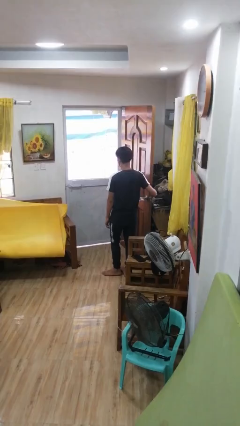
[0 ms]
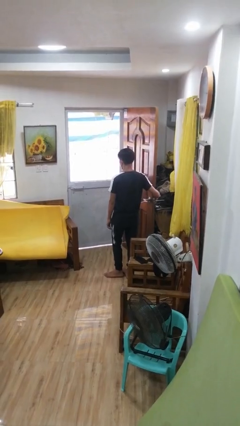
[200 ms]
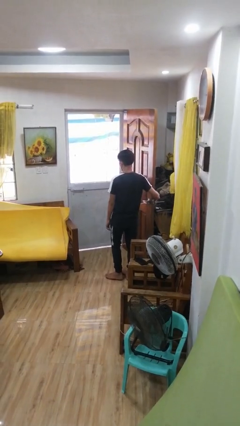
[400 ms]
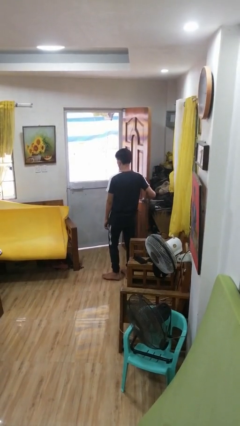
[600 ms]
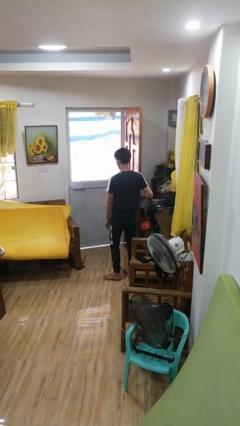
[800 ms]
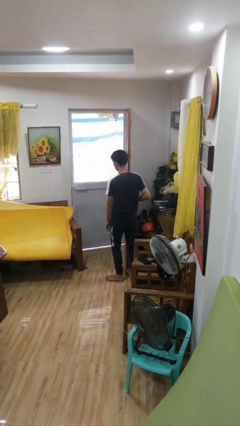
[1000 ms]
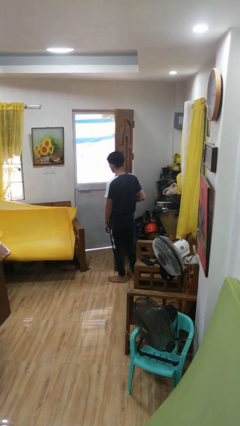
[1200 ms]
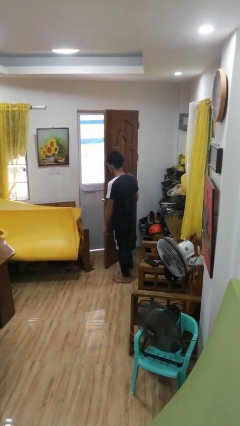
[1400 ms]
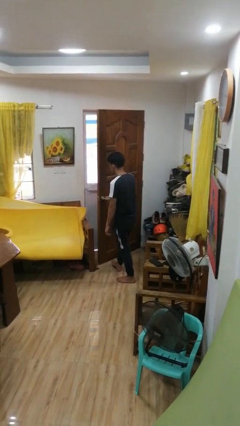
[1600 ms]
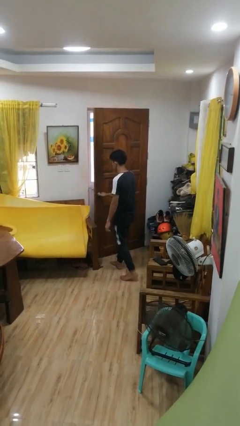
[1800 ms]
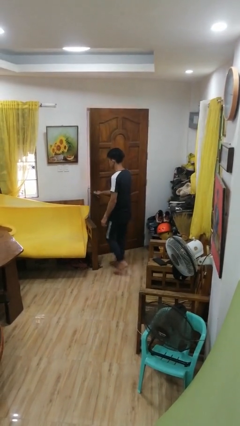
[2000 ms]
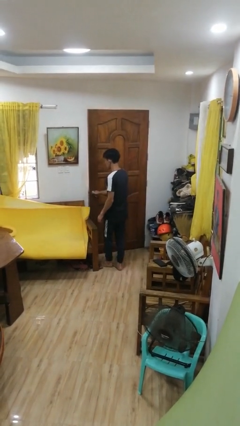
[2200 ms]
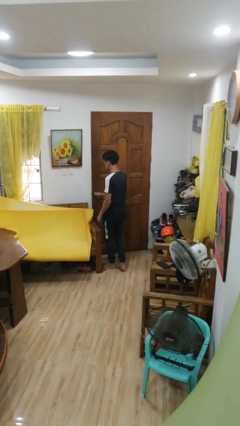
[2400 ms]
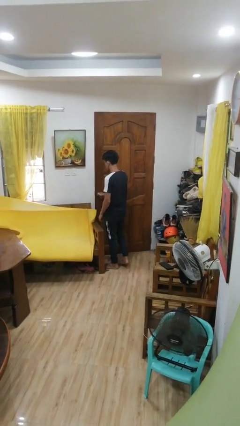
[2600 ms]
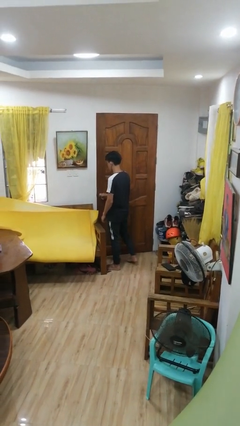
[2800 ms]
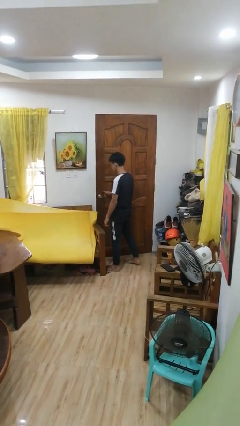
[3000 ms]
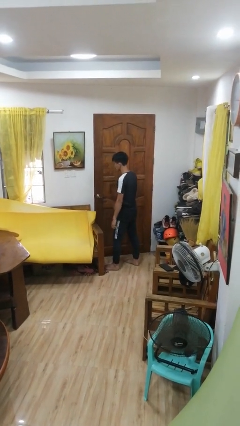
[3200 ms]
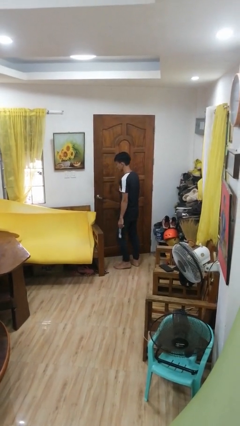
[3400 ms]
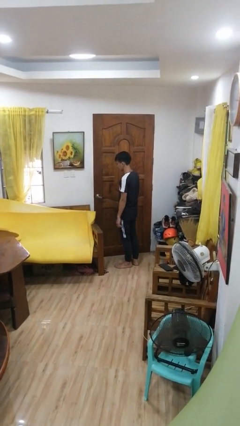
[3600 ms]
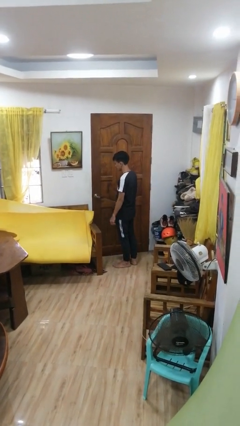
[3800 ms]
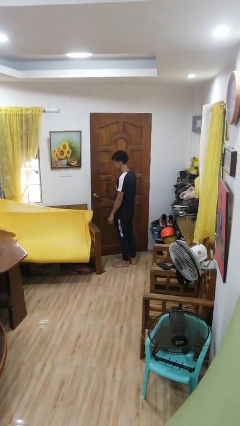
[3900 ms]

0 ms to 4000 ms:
person closes facility door

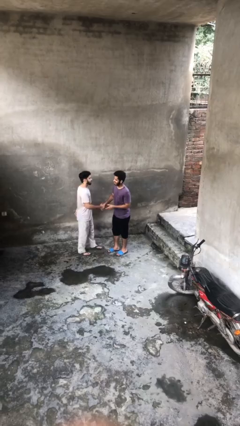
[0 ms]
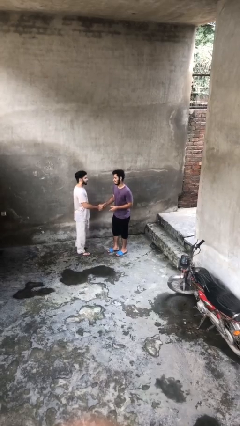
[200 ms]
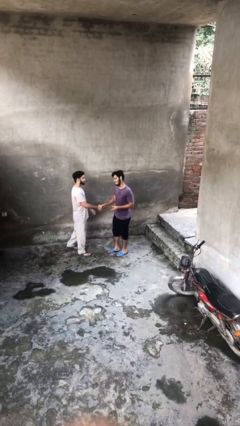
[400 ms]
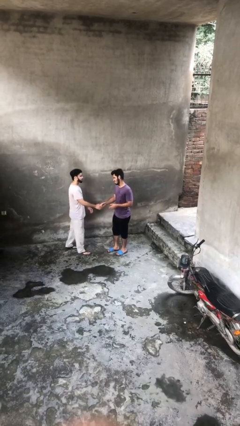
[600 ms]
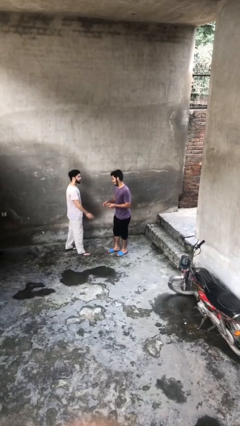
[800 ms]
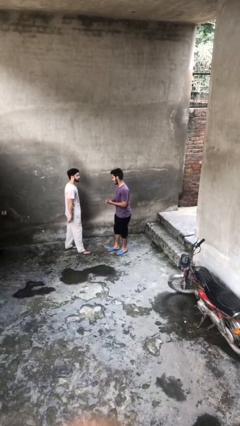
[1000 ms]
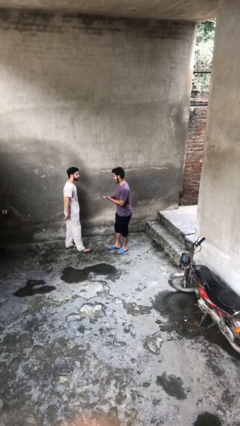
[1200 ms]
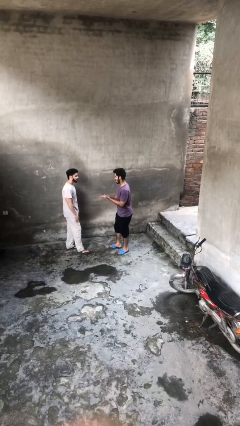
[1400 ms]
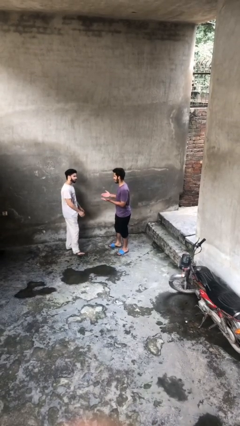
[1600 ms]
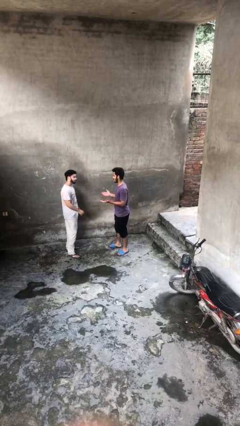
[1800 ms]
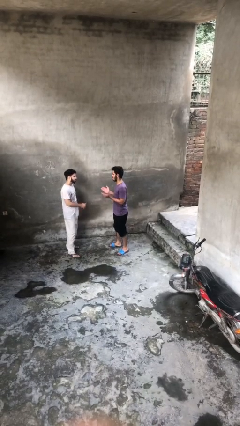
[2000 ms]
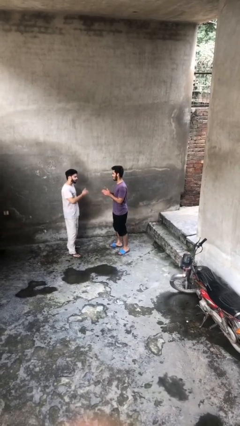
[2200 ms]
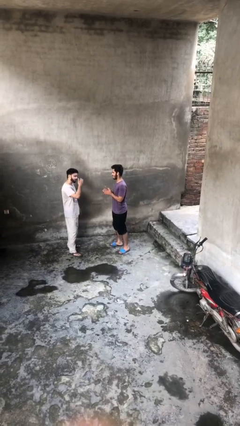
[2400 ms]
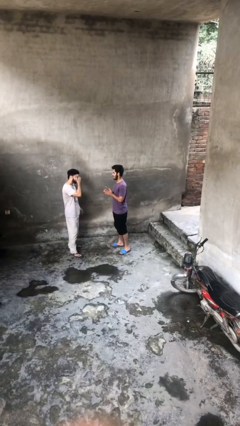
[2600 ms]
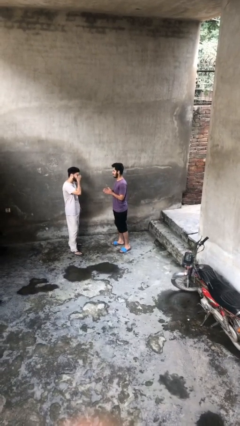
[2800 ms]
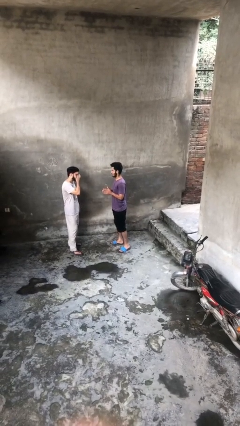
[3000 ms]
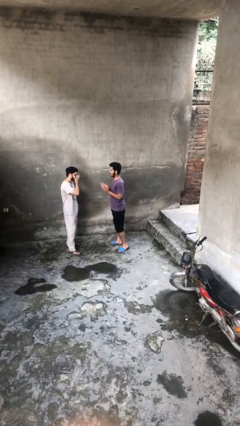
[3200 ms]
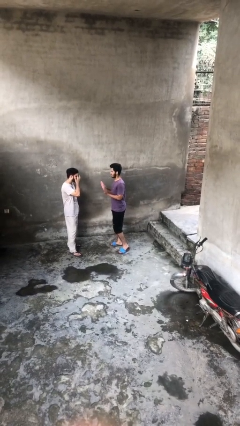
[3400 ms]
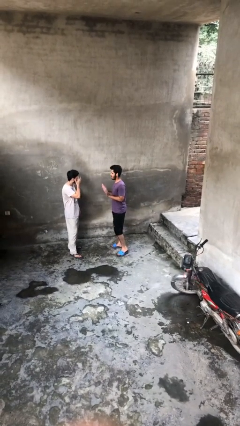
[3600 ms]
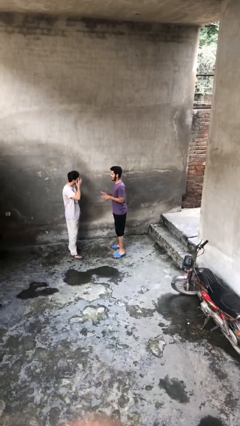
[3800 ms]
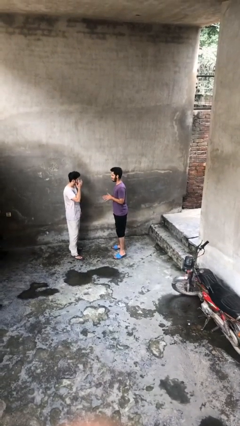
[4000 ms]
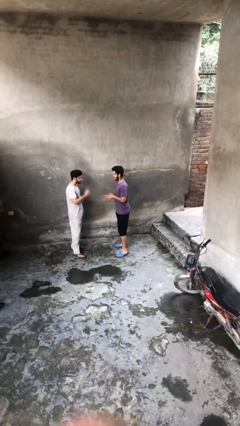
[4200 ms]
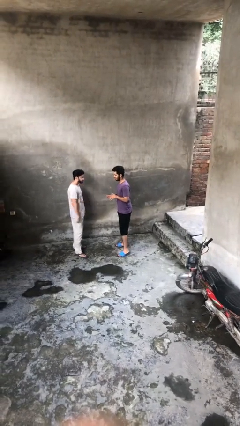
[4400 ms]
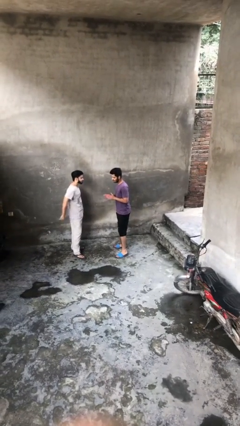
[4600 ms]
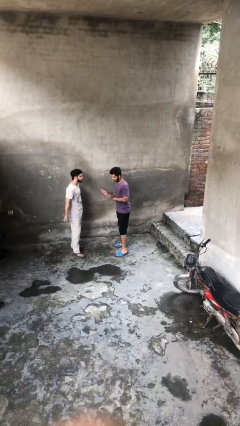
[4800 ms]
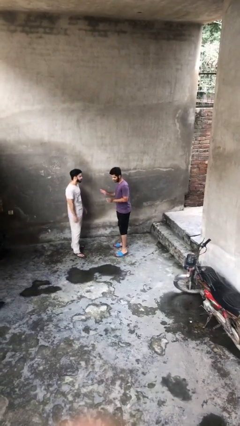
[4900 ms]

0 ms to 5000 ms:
person talks to person

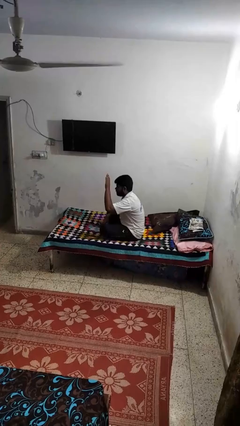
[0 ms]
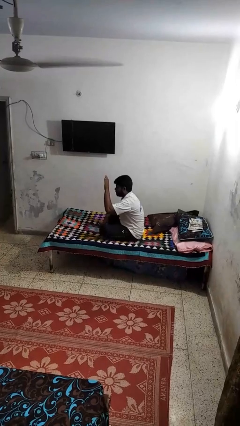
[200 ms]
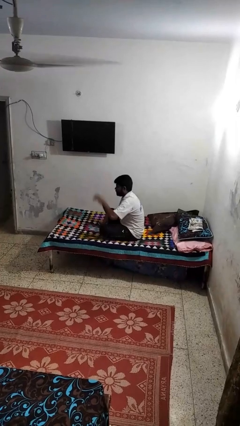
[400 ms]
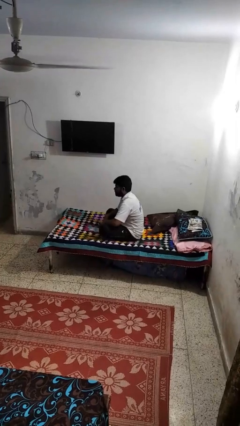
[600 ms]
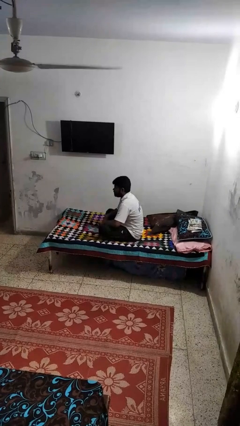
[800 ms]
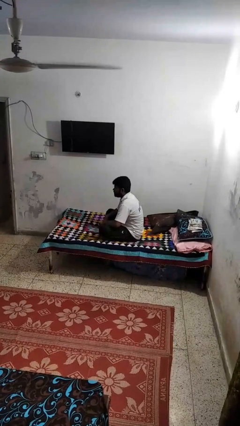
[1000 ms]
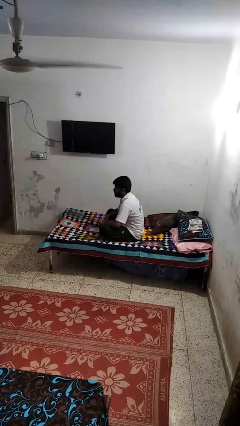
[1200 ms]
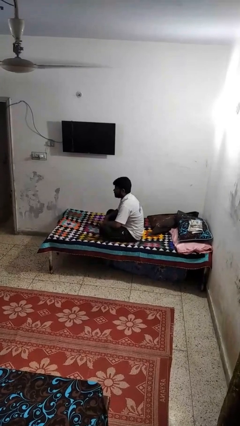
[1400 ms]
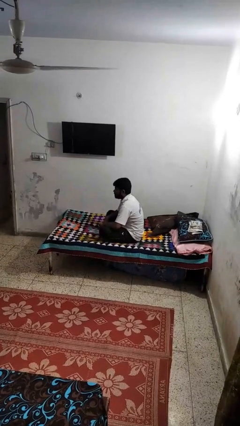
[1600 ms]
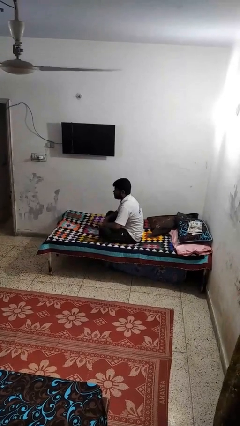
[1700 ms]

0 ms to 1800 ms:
person gestures lower hand

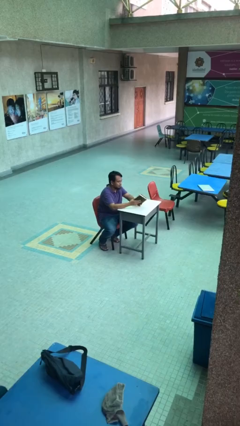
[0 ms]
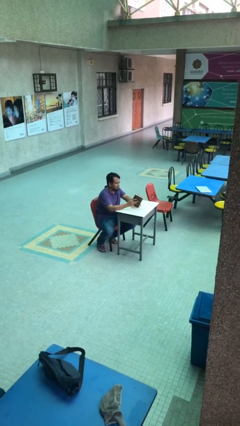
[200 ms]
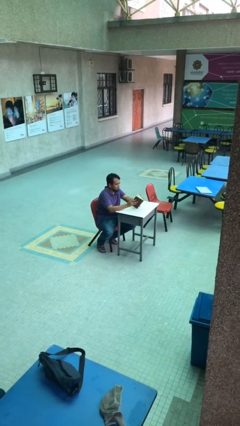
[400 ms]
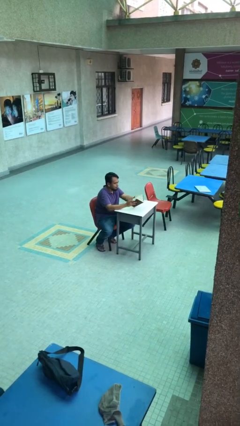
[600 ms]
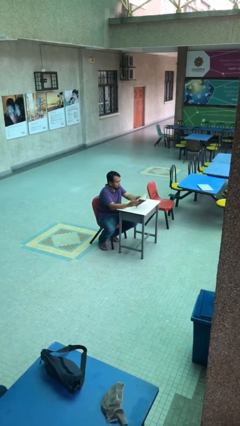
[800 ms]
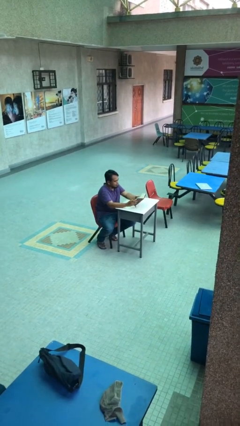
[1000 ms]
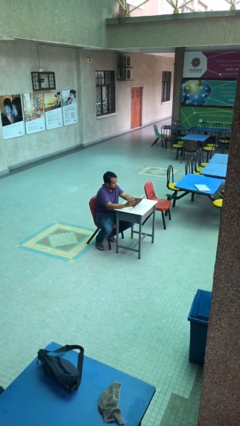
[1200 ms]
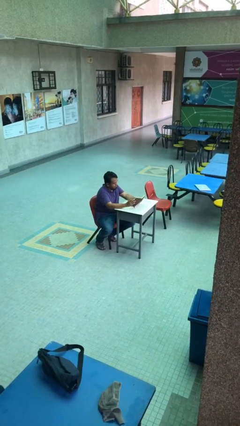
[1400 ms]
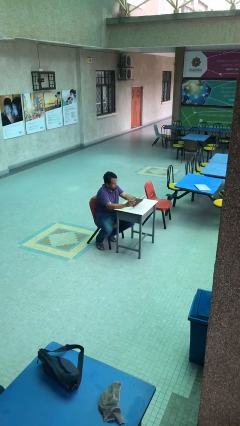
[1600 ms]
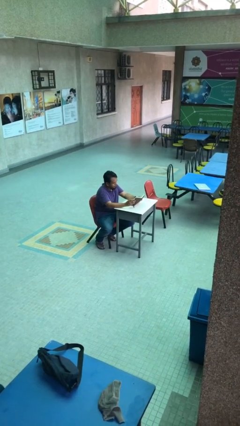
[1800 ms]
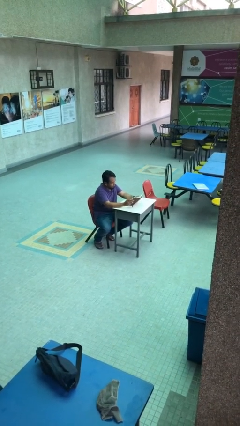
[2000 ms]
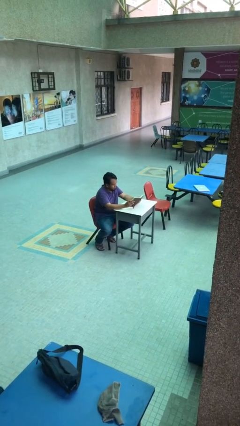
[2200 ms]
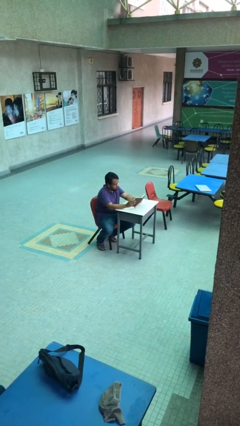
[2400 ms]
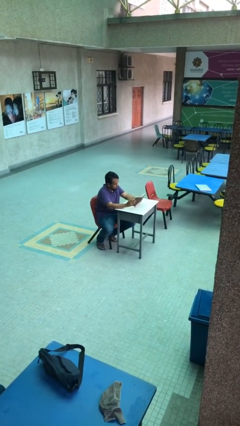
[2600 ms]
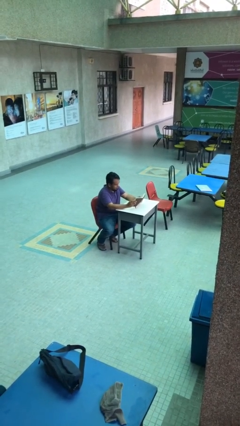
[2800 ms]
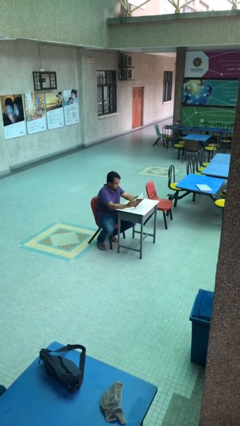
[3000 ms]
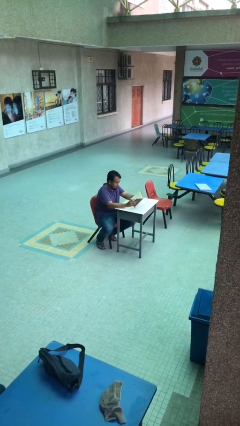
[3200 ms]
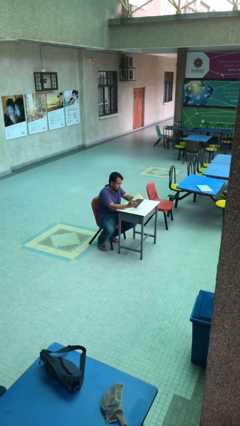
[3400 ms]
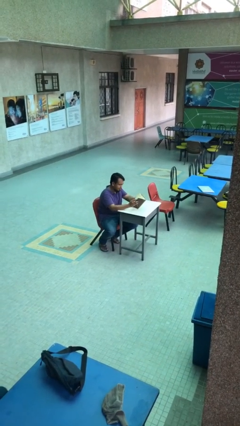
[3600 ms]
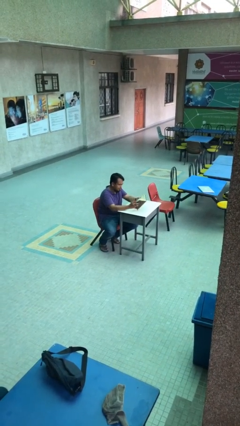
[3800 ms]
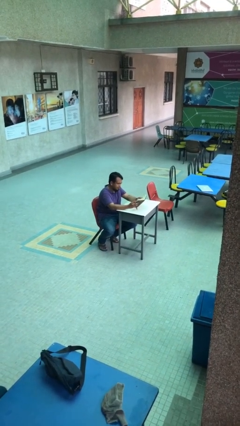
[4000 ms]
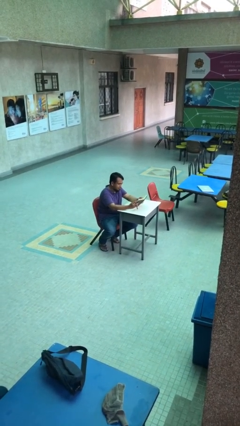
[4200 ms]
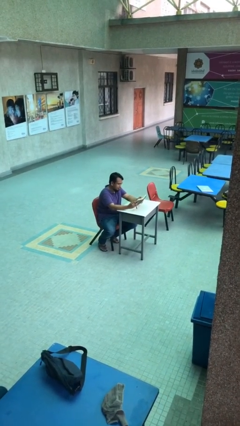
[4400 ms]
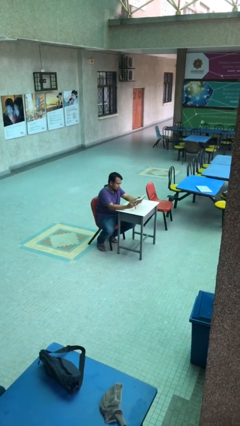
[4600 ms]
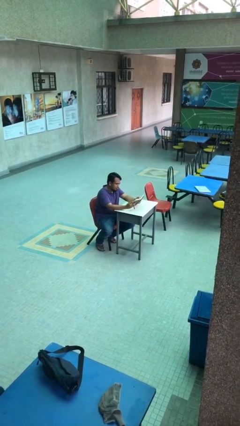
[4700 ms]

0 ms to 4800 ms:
person reads document

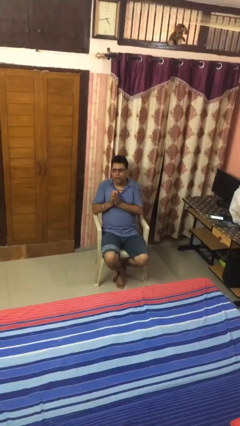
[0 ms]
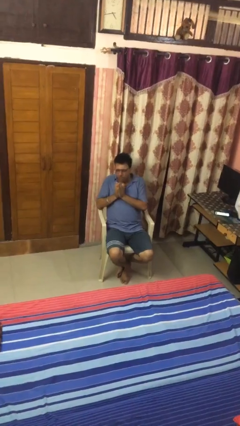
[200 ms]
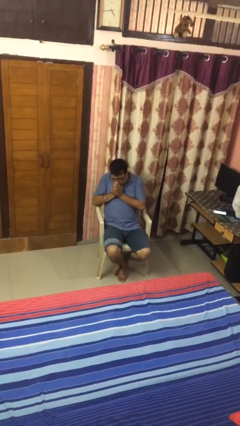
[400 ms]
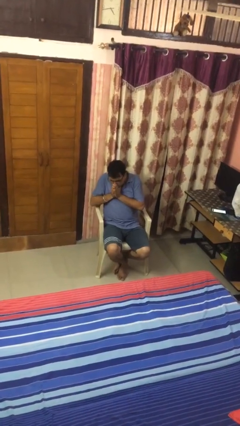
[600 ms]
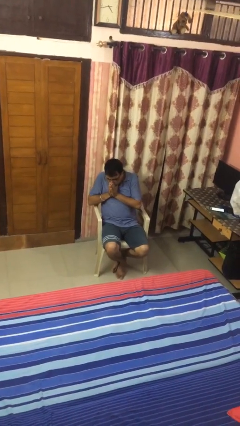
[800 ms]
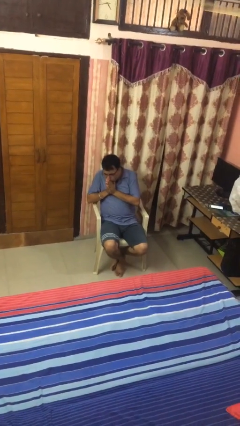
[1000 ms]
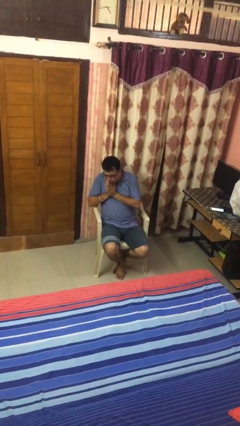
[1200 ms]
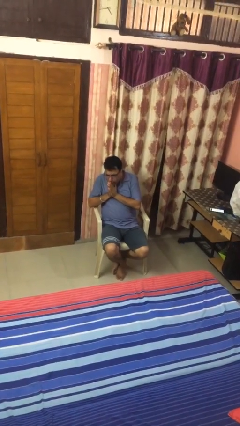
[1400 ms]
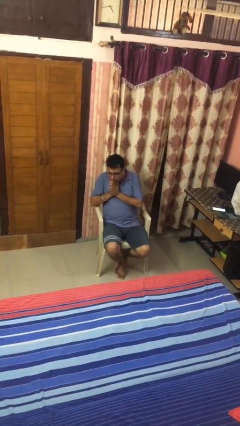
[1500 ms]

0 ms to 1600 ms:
person sneezes into hand
